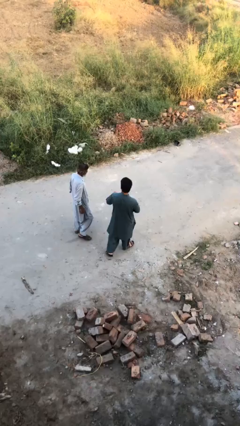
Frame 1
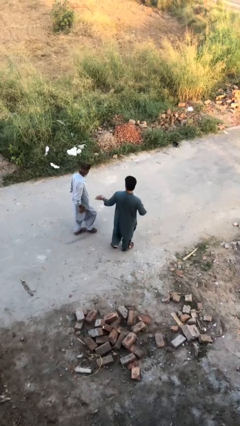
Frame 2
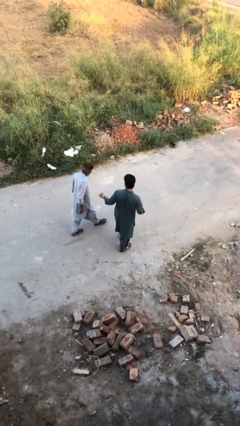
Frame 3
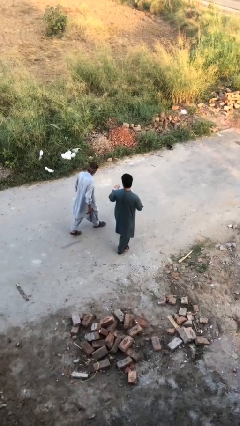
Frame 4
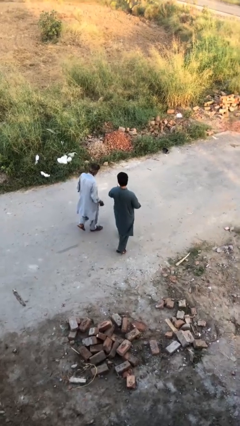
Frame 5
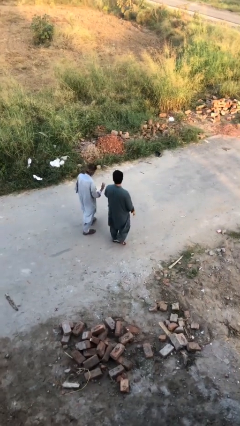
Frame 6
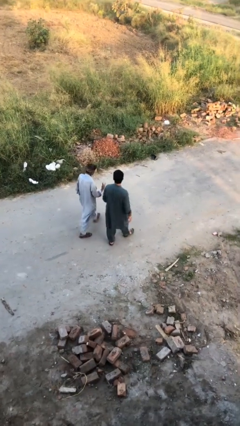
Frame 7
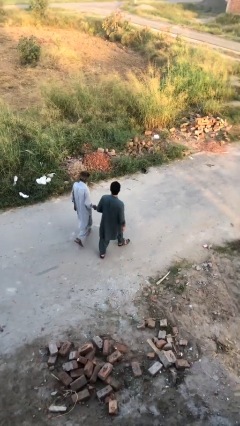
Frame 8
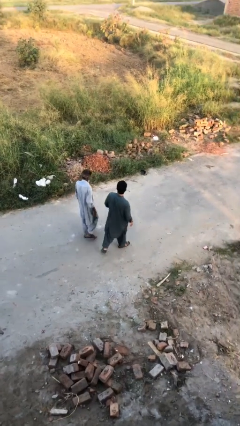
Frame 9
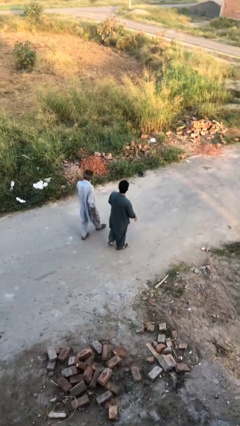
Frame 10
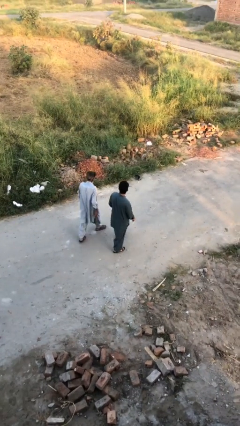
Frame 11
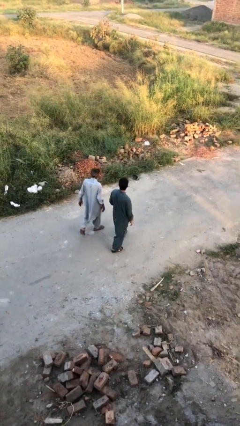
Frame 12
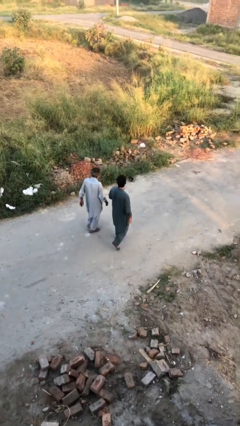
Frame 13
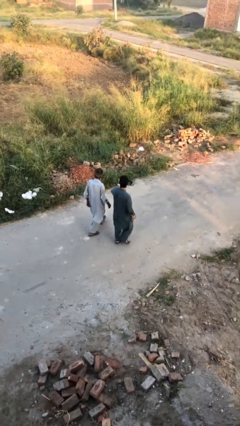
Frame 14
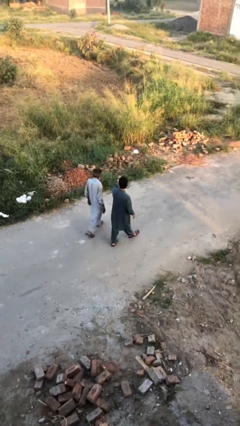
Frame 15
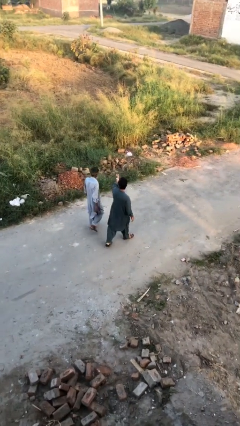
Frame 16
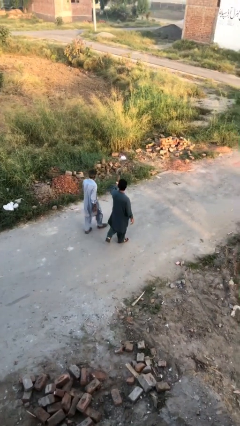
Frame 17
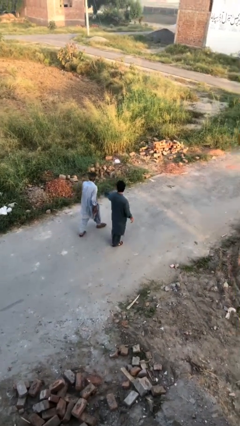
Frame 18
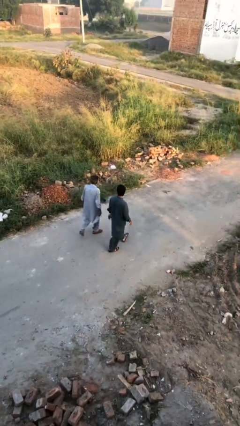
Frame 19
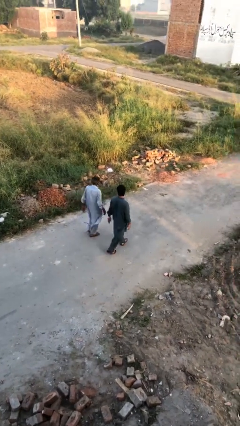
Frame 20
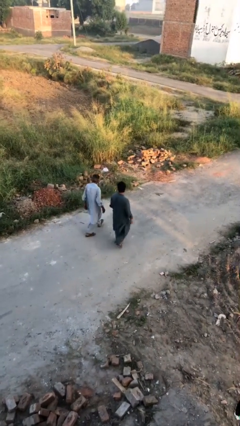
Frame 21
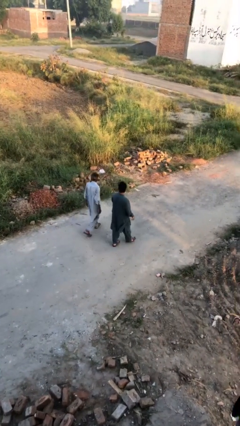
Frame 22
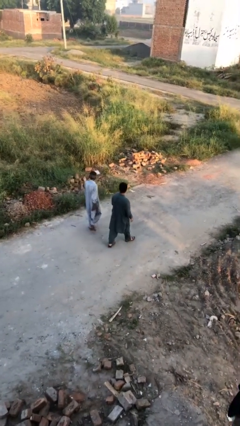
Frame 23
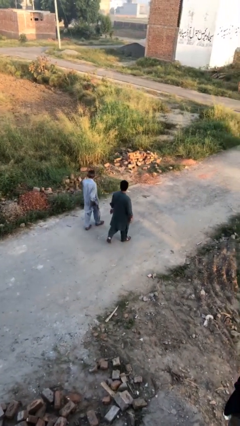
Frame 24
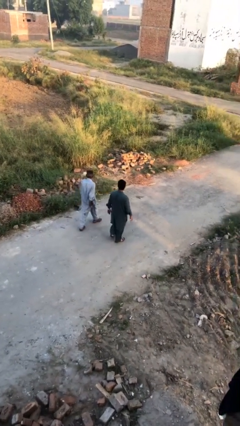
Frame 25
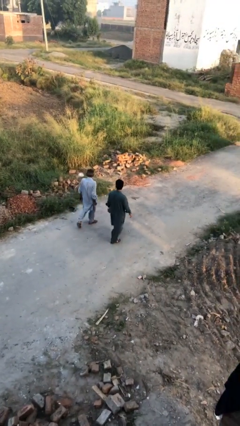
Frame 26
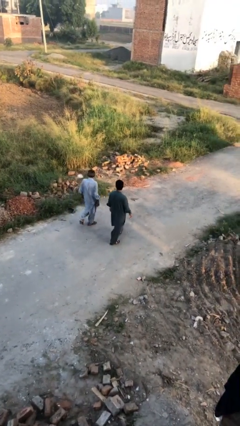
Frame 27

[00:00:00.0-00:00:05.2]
person talks to person

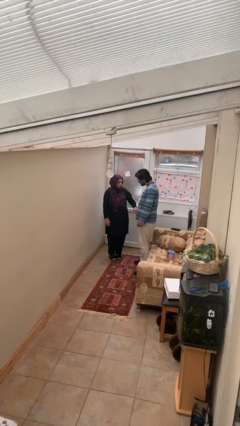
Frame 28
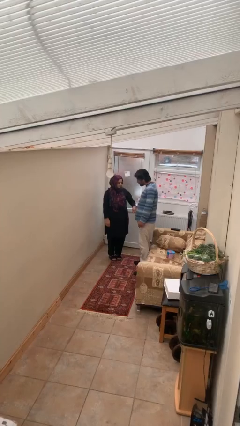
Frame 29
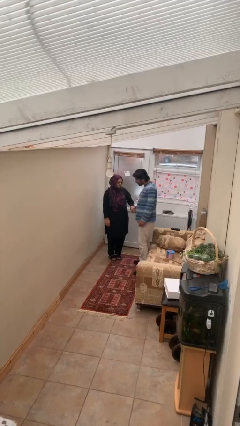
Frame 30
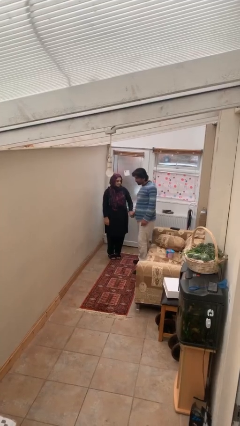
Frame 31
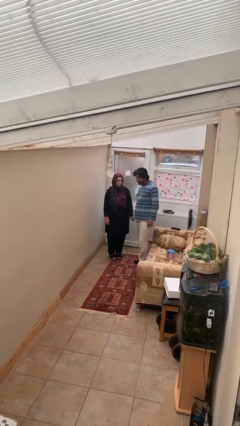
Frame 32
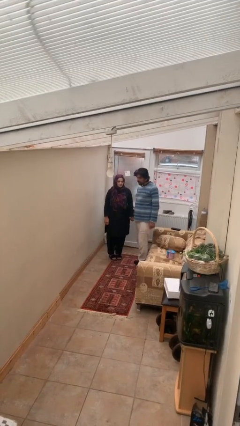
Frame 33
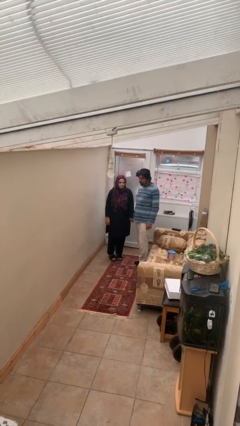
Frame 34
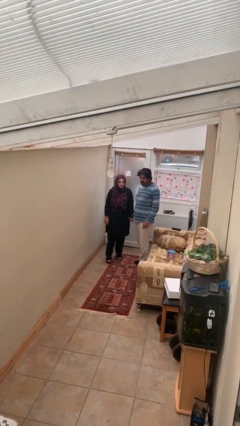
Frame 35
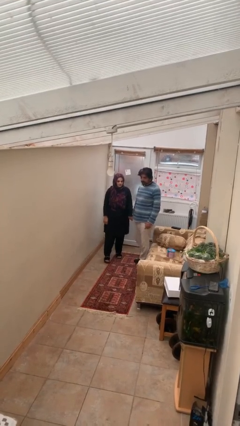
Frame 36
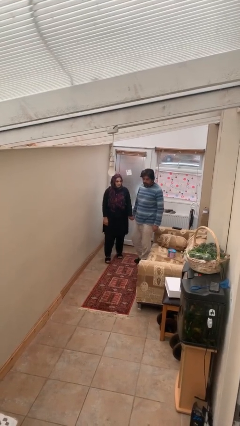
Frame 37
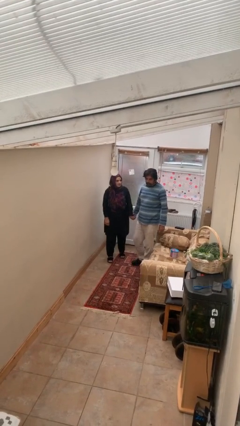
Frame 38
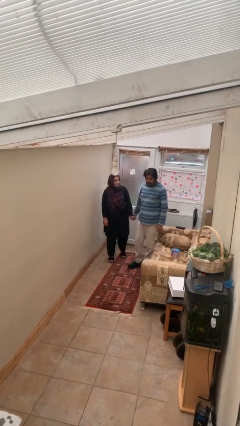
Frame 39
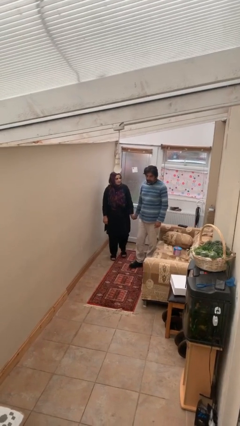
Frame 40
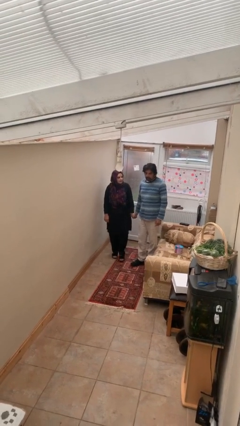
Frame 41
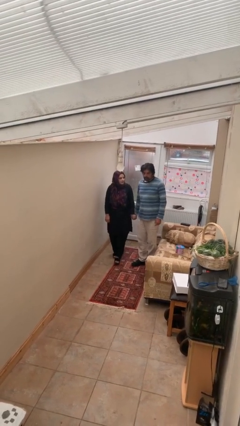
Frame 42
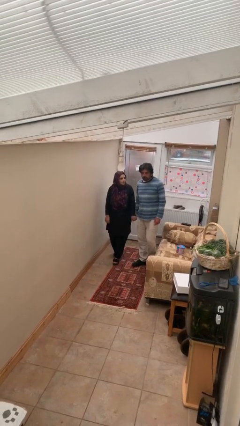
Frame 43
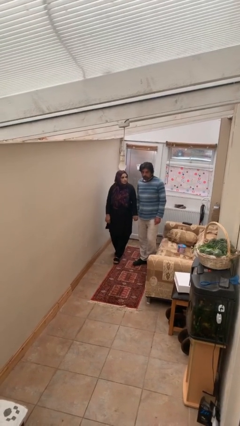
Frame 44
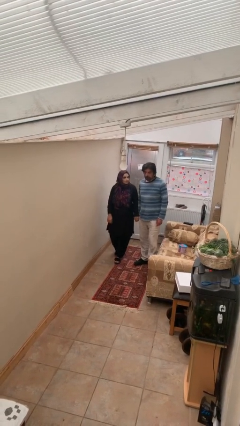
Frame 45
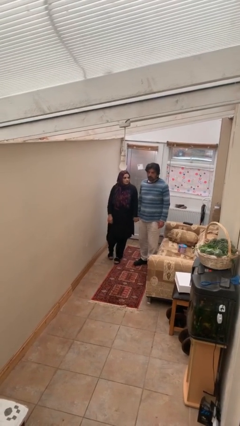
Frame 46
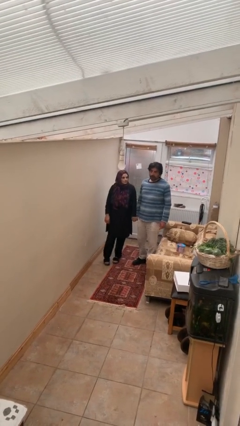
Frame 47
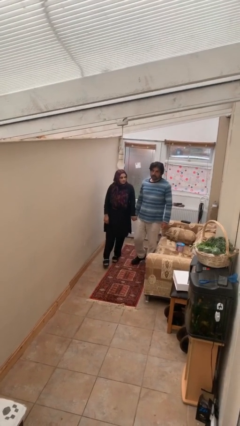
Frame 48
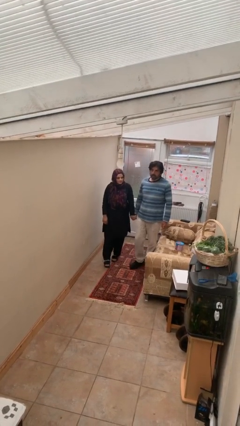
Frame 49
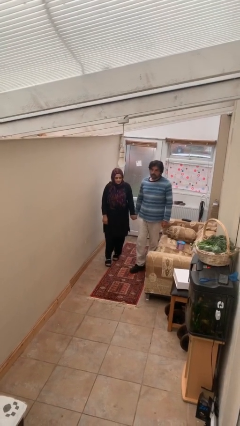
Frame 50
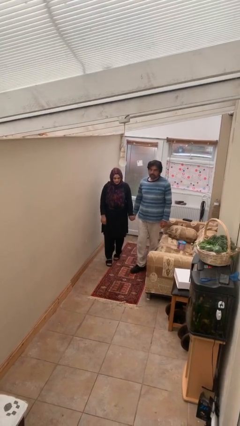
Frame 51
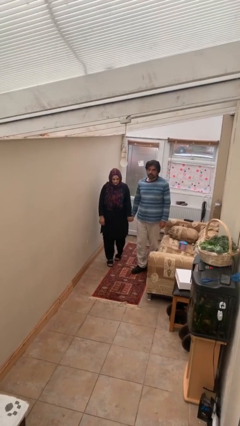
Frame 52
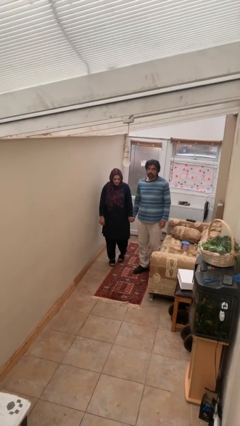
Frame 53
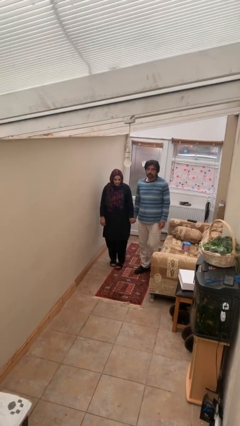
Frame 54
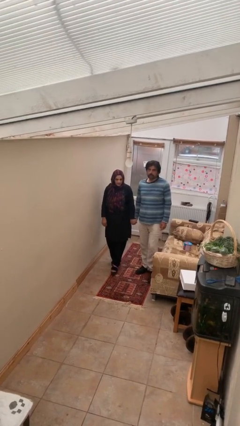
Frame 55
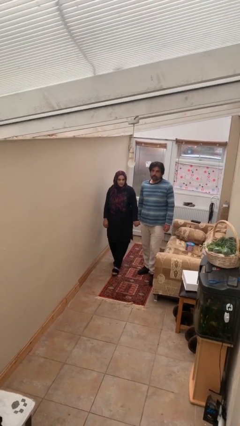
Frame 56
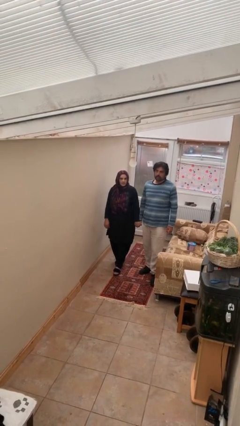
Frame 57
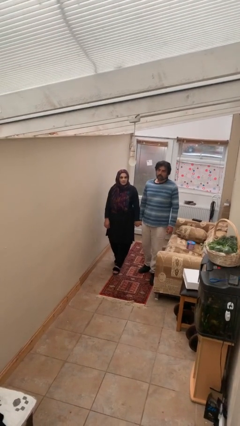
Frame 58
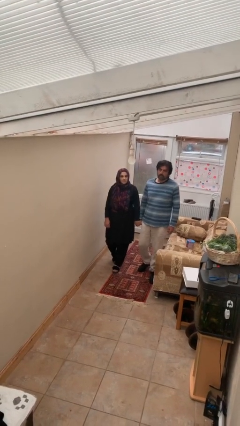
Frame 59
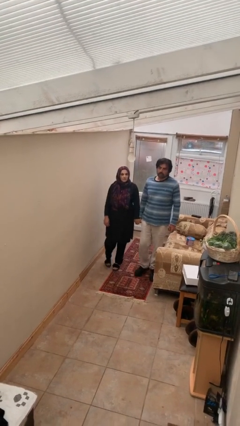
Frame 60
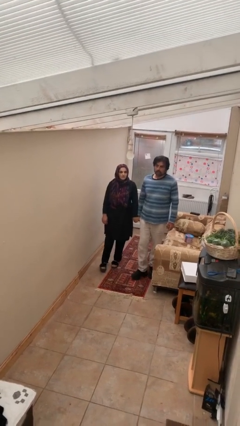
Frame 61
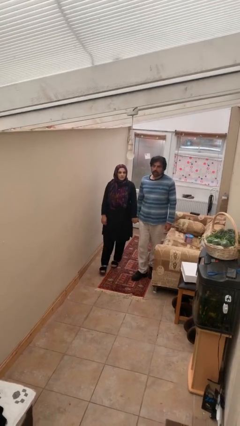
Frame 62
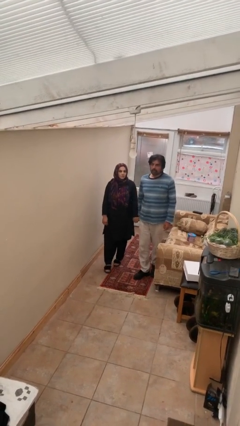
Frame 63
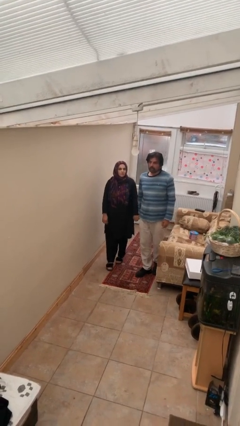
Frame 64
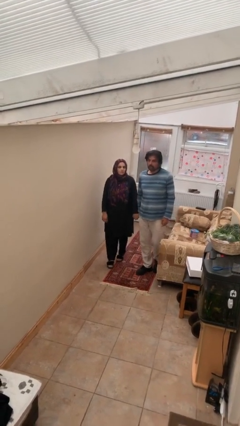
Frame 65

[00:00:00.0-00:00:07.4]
person holds hand

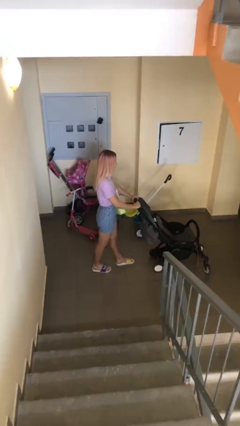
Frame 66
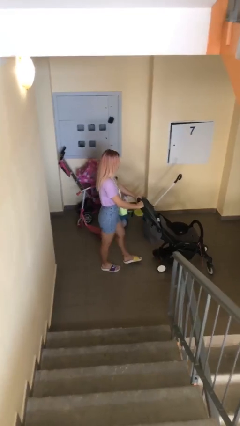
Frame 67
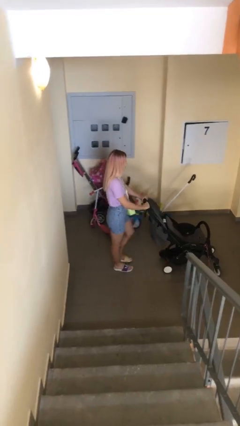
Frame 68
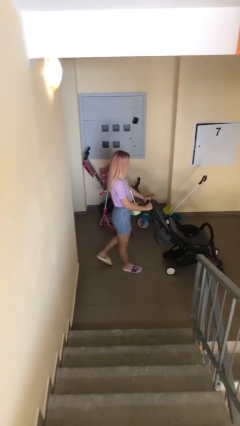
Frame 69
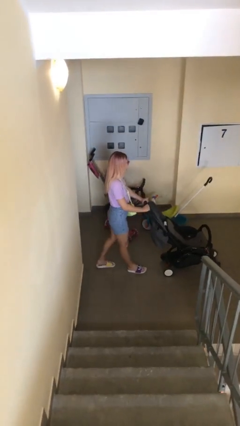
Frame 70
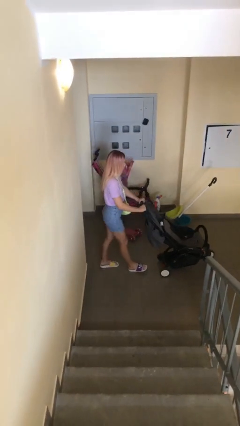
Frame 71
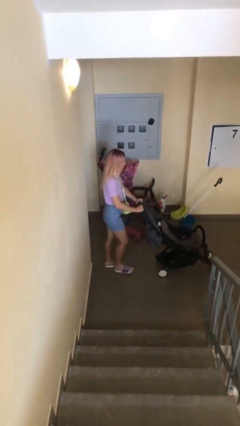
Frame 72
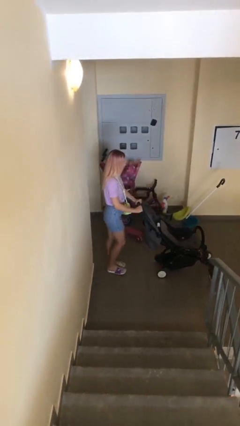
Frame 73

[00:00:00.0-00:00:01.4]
person pulls wheeled cart

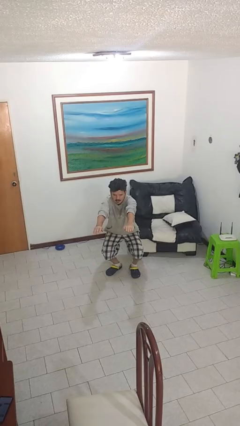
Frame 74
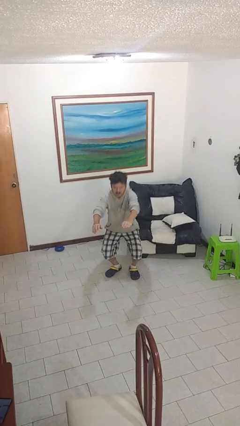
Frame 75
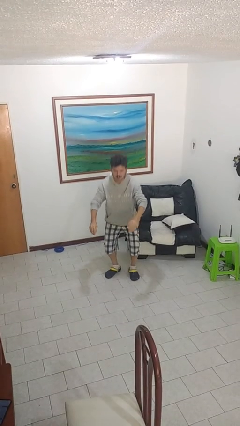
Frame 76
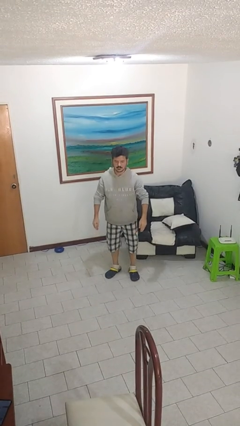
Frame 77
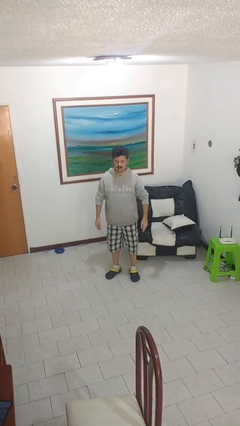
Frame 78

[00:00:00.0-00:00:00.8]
person stands up

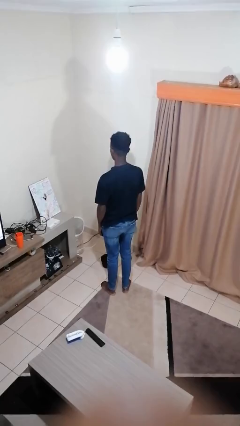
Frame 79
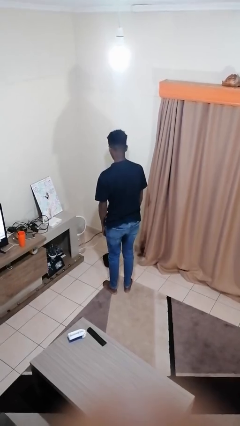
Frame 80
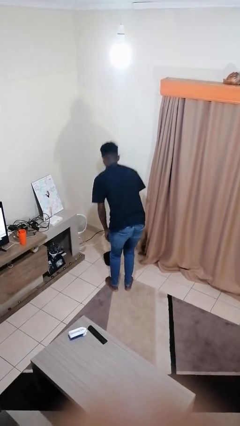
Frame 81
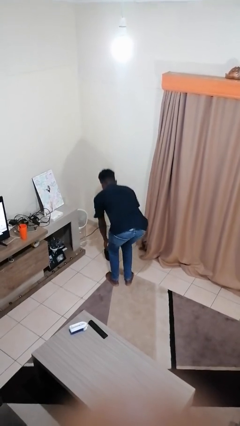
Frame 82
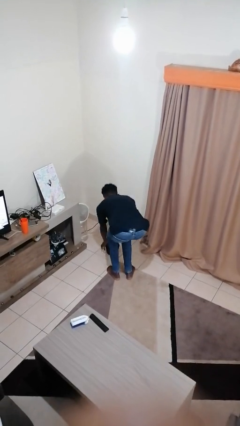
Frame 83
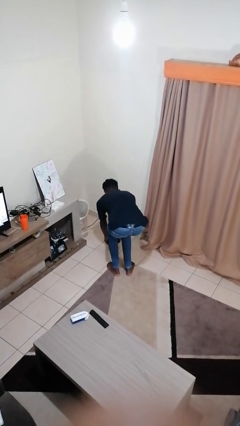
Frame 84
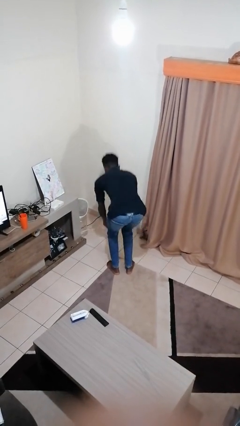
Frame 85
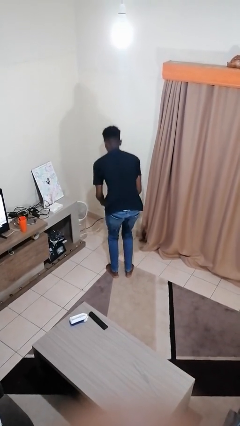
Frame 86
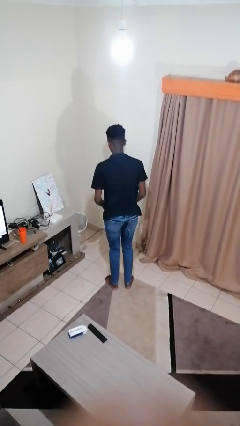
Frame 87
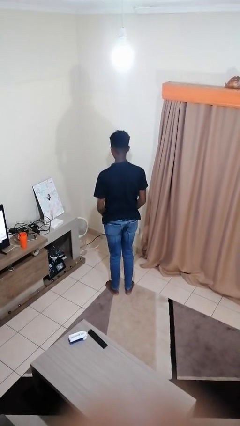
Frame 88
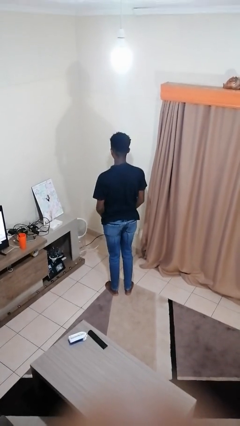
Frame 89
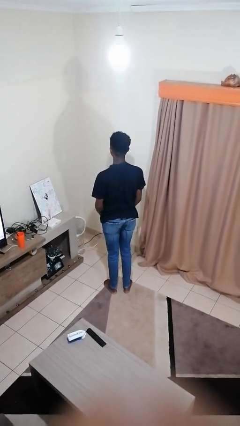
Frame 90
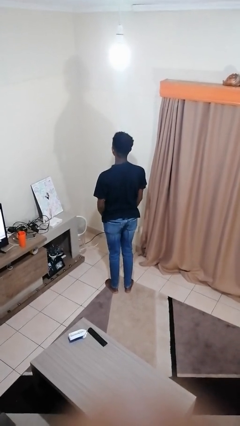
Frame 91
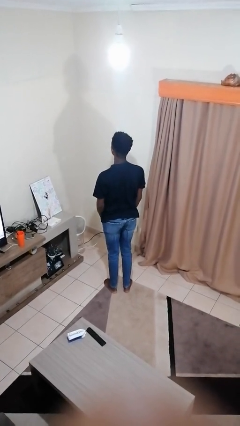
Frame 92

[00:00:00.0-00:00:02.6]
person picks up object from floor

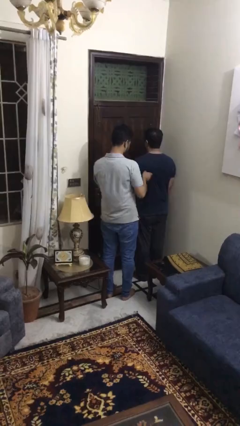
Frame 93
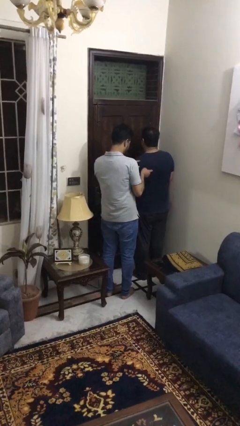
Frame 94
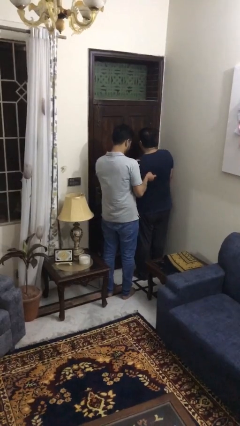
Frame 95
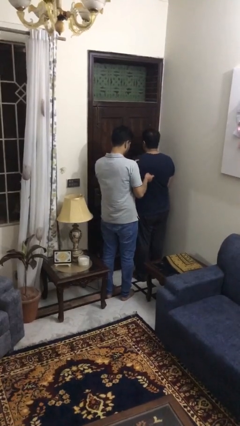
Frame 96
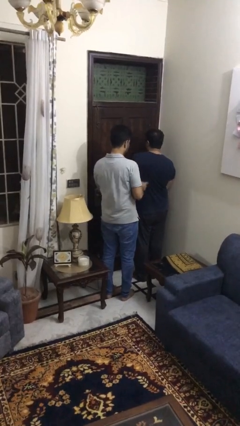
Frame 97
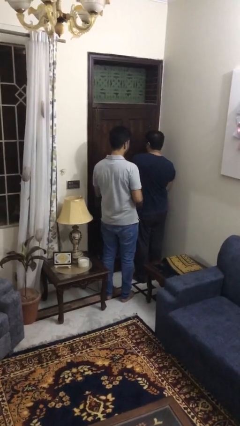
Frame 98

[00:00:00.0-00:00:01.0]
person tickles person
